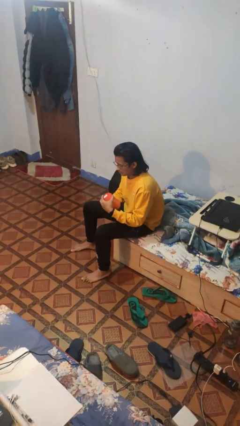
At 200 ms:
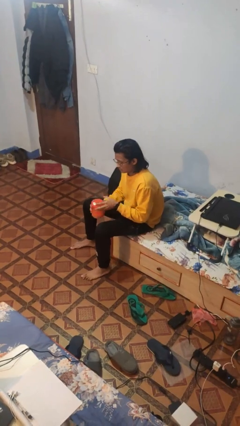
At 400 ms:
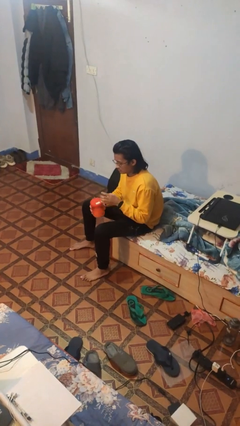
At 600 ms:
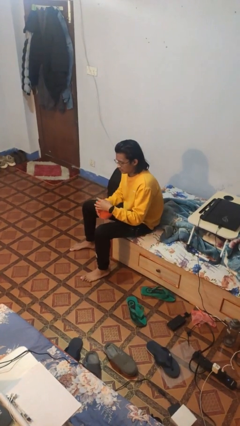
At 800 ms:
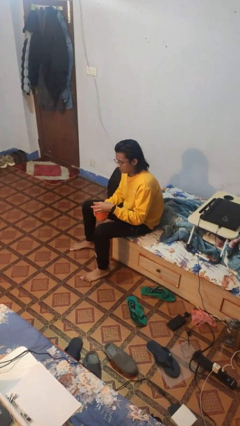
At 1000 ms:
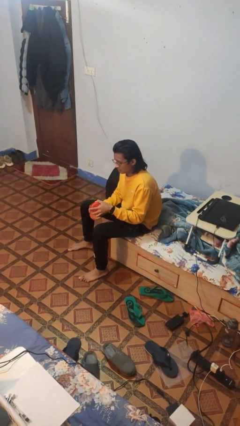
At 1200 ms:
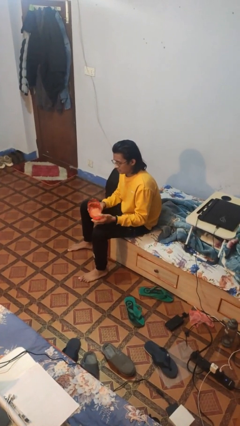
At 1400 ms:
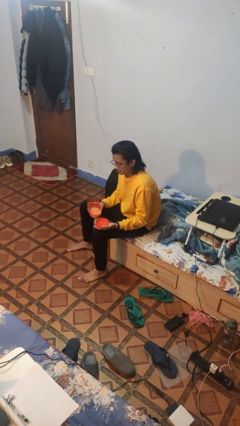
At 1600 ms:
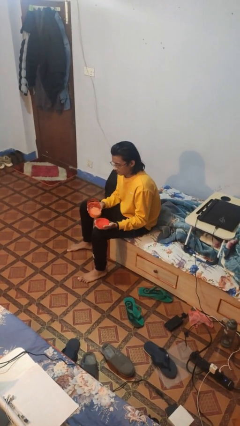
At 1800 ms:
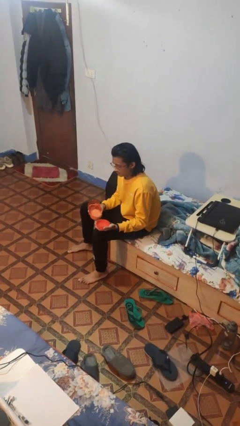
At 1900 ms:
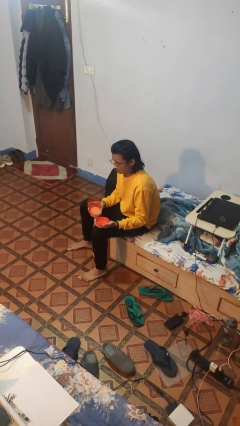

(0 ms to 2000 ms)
person opens jar

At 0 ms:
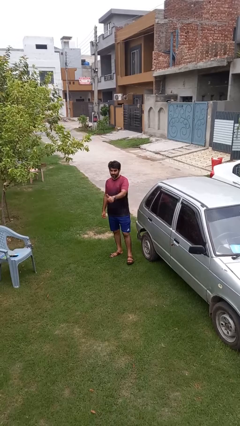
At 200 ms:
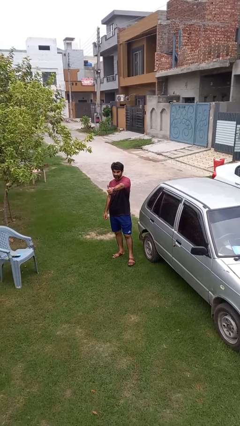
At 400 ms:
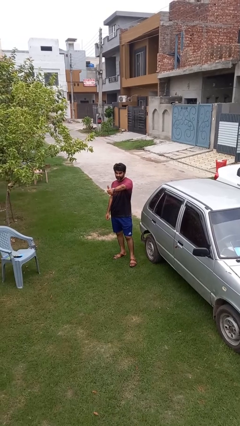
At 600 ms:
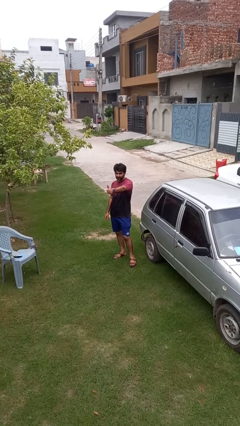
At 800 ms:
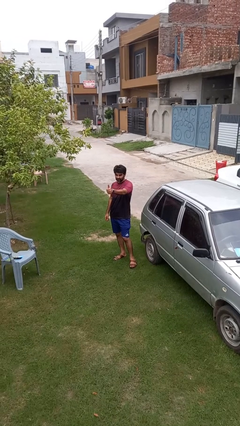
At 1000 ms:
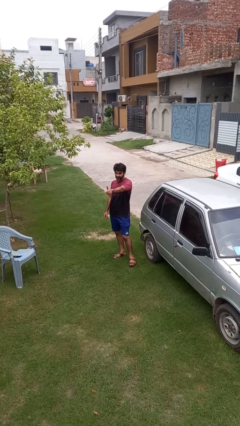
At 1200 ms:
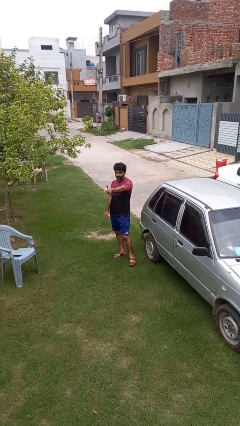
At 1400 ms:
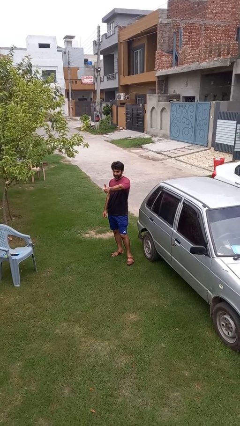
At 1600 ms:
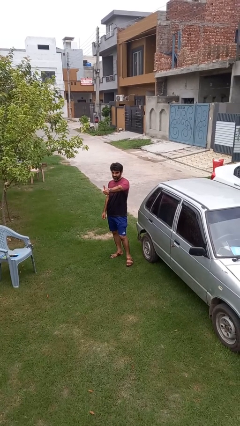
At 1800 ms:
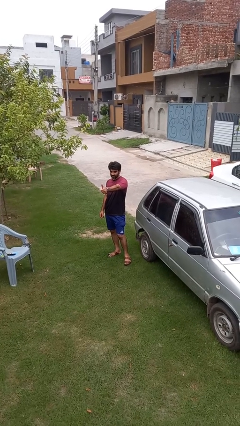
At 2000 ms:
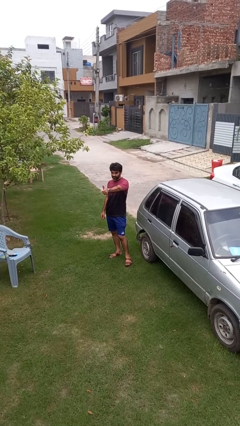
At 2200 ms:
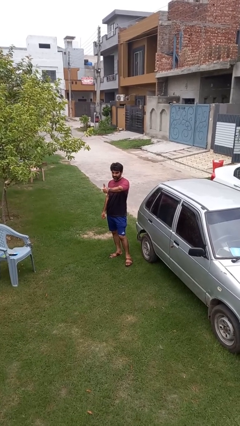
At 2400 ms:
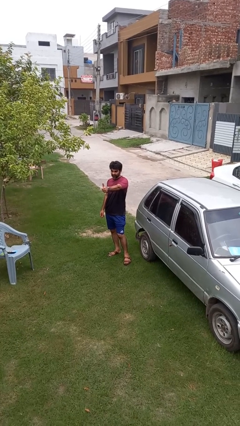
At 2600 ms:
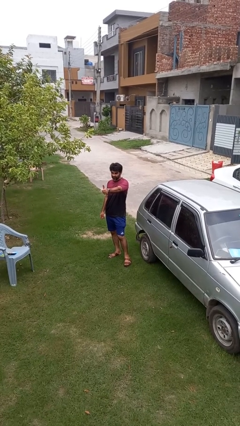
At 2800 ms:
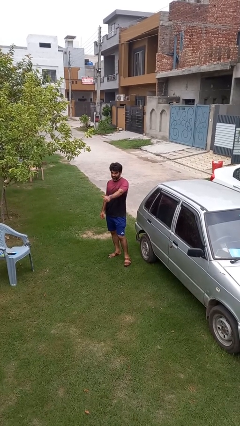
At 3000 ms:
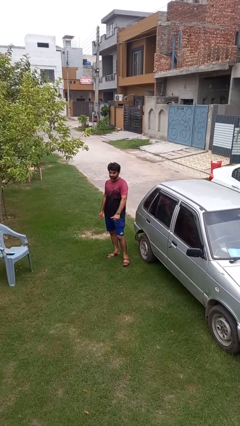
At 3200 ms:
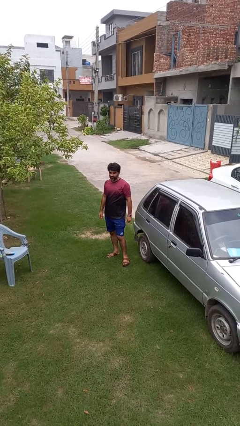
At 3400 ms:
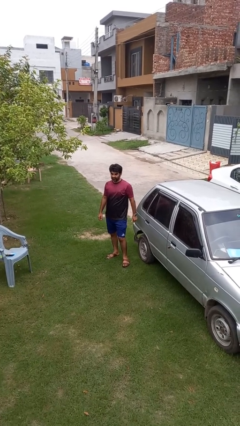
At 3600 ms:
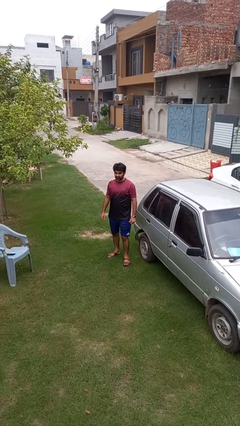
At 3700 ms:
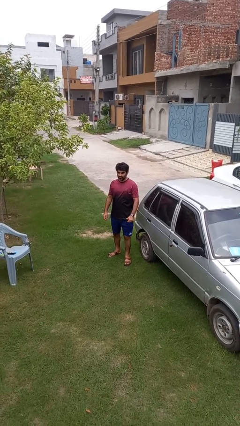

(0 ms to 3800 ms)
person gestures thumbs up

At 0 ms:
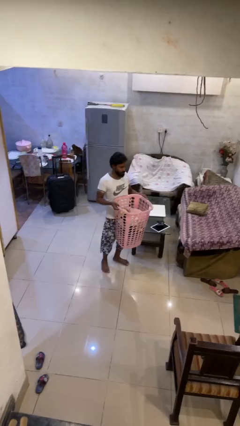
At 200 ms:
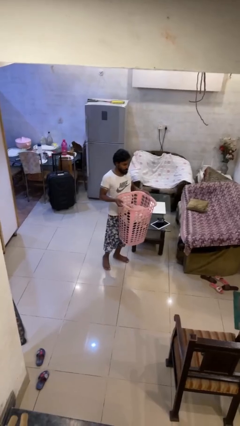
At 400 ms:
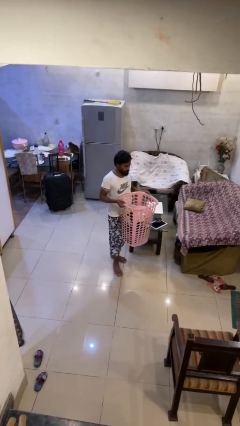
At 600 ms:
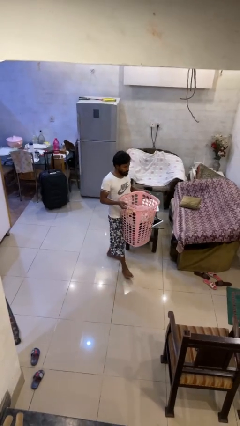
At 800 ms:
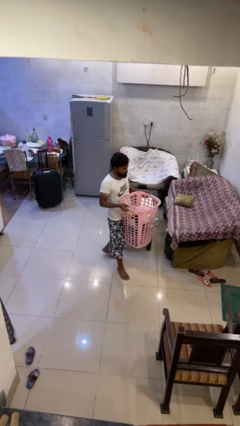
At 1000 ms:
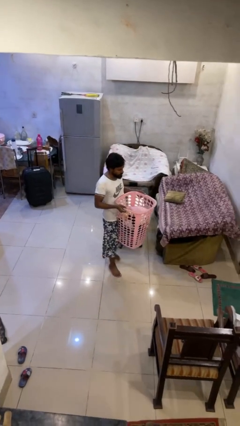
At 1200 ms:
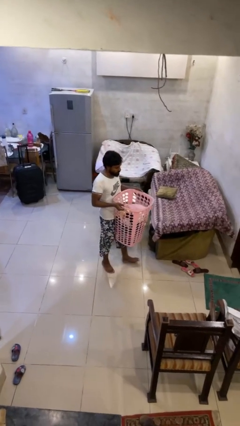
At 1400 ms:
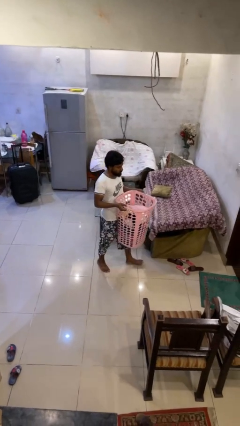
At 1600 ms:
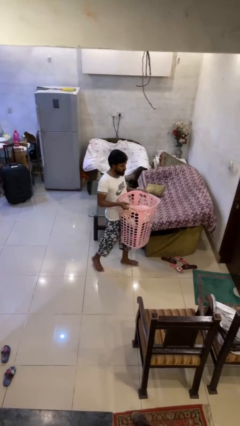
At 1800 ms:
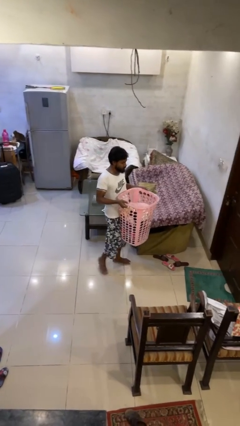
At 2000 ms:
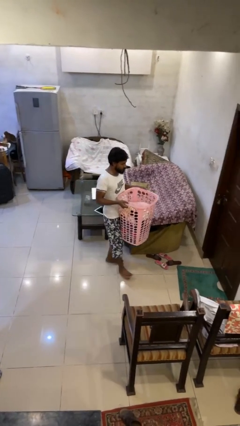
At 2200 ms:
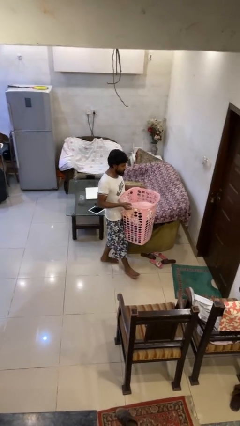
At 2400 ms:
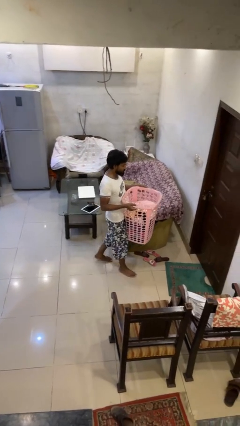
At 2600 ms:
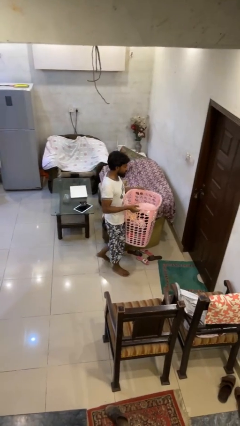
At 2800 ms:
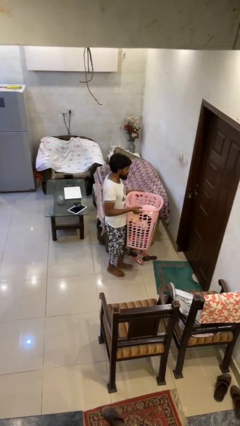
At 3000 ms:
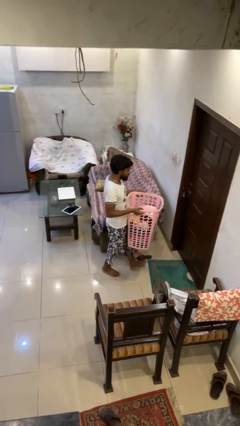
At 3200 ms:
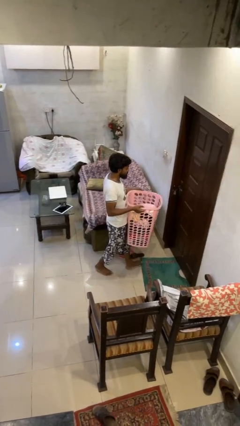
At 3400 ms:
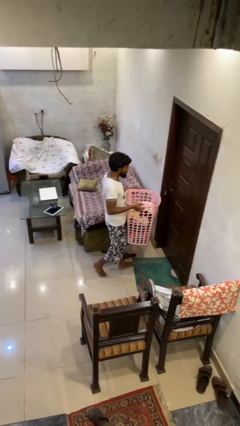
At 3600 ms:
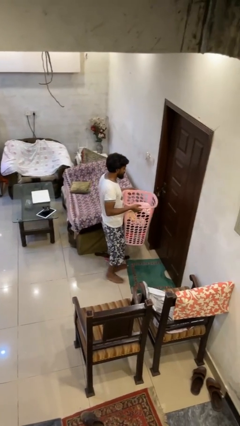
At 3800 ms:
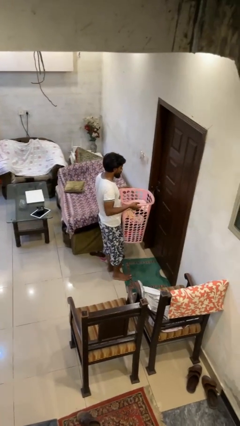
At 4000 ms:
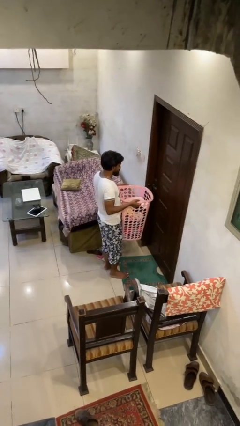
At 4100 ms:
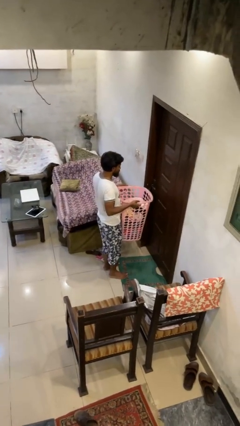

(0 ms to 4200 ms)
person carries laundry basket

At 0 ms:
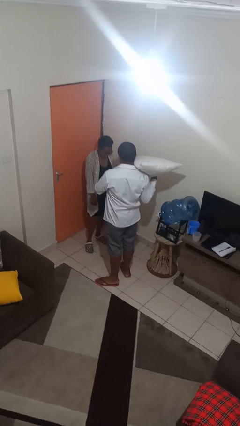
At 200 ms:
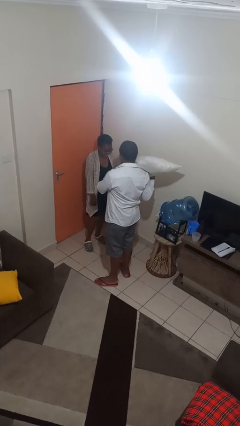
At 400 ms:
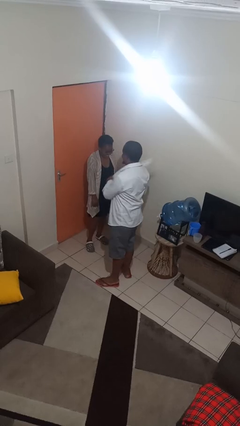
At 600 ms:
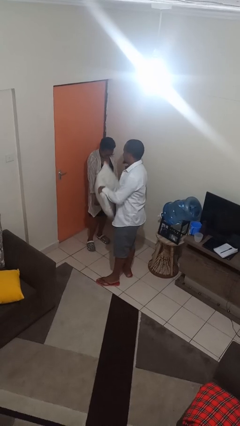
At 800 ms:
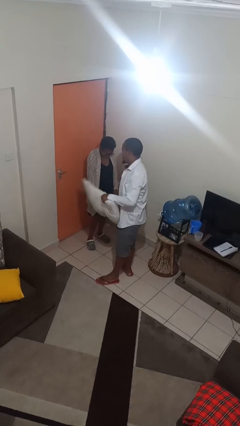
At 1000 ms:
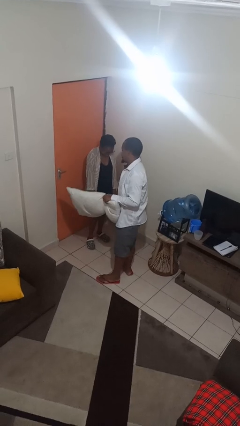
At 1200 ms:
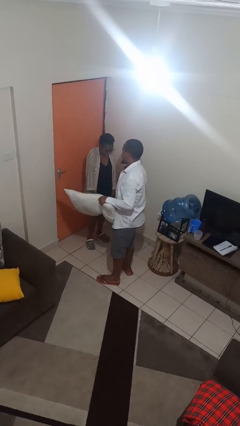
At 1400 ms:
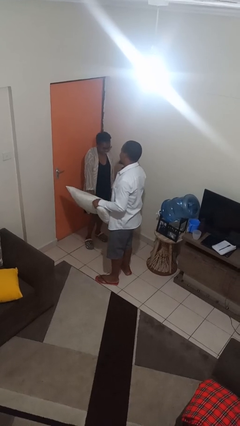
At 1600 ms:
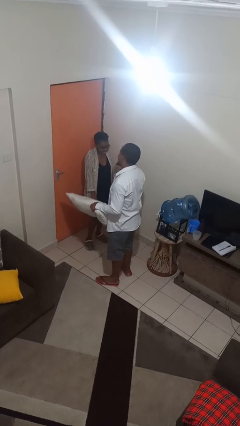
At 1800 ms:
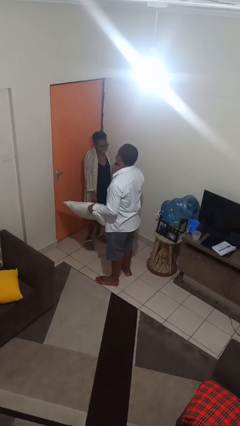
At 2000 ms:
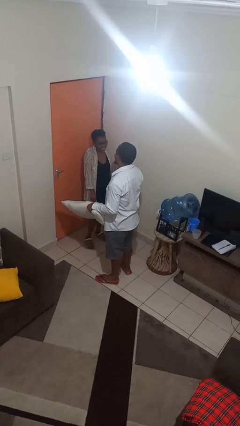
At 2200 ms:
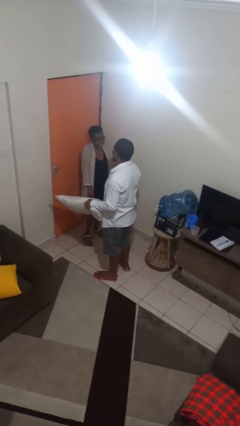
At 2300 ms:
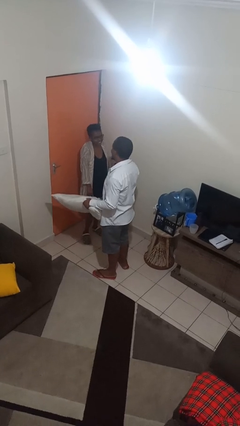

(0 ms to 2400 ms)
person hits person with pillow

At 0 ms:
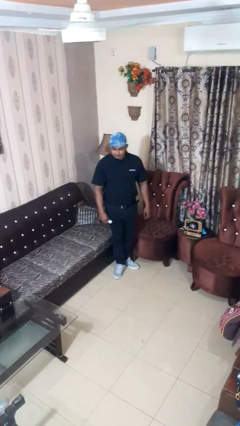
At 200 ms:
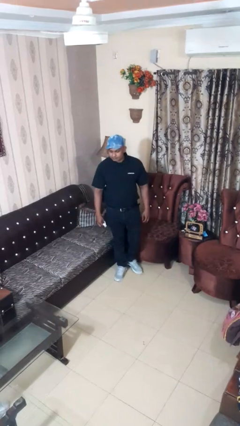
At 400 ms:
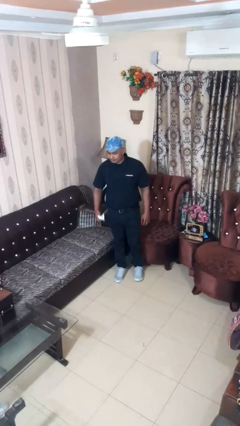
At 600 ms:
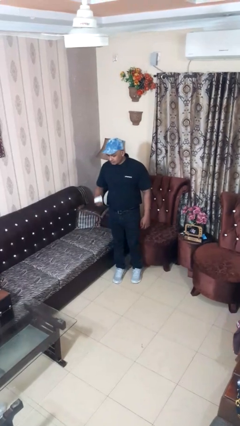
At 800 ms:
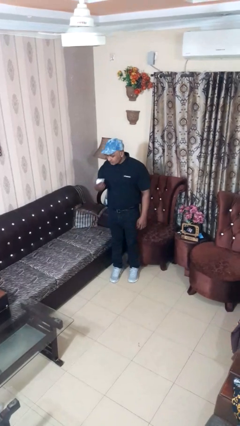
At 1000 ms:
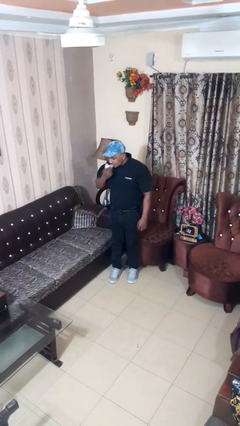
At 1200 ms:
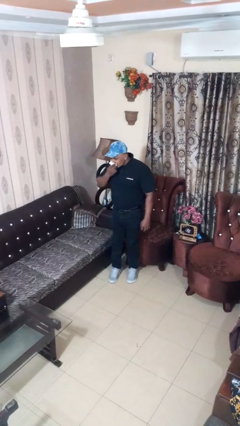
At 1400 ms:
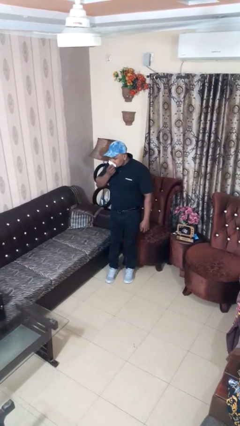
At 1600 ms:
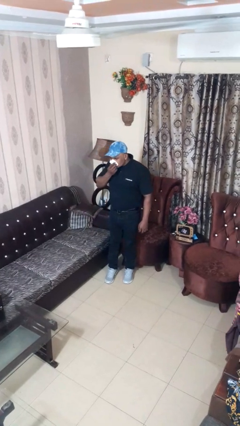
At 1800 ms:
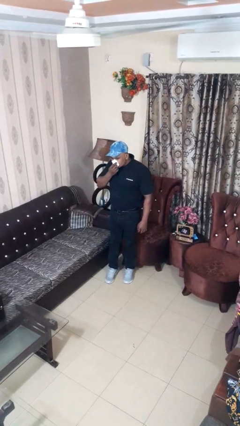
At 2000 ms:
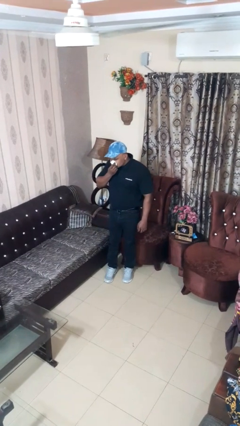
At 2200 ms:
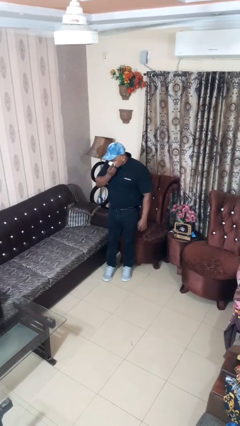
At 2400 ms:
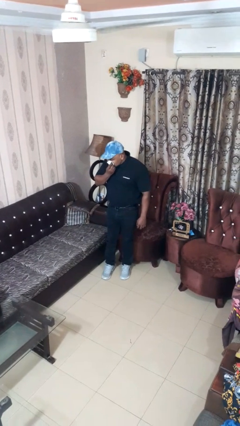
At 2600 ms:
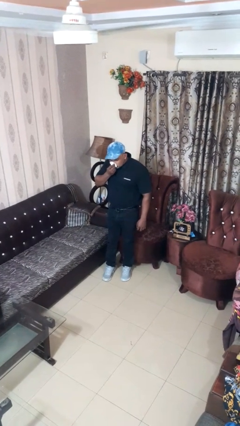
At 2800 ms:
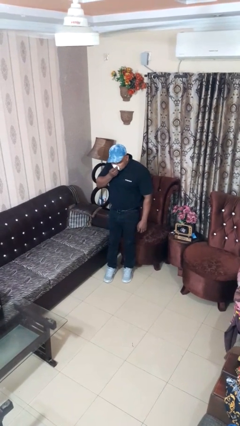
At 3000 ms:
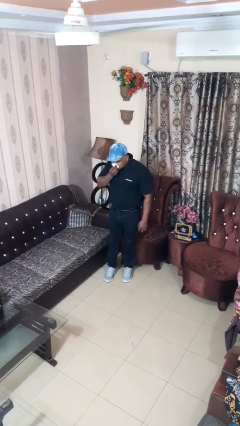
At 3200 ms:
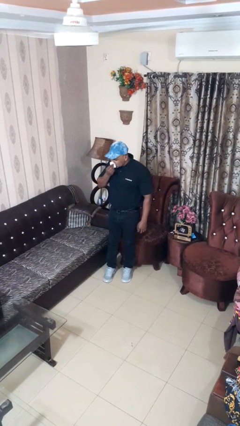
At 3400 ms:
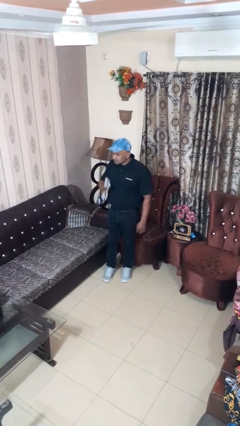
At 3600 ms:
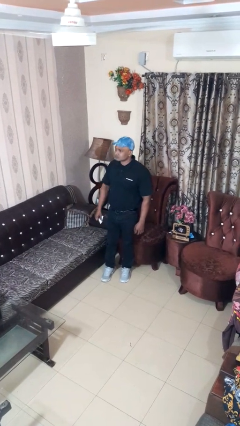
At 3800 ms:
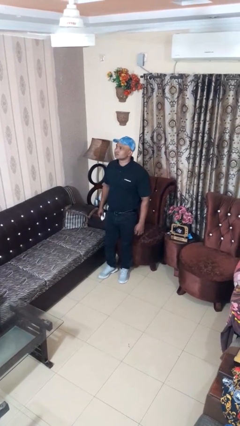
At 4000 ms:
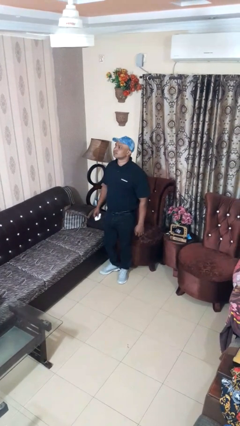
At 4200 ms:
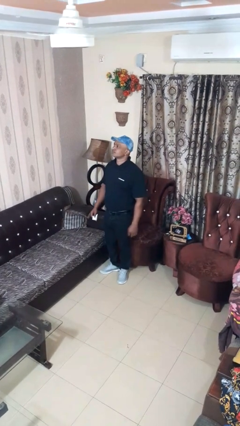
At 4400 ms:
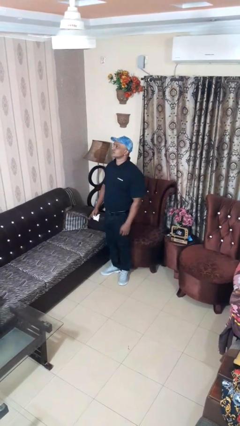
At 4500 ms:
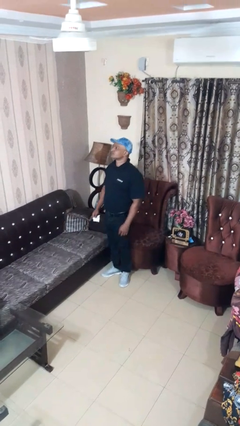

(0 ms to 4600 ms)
person blows nose

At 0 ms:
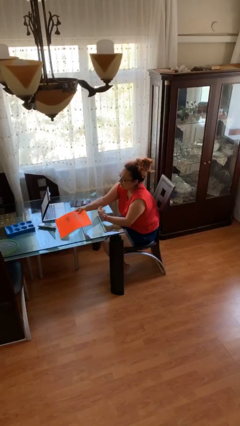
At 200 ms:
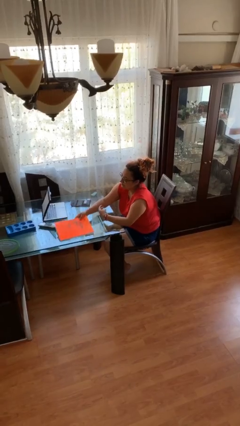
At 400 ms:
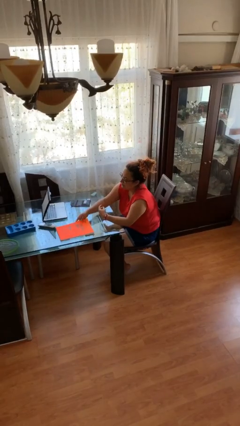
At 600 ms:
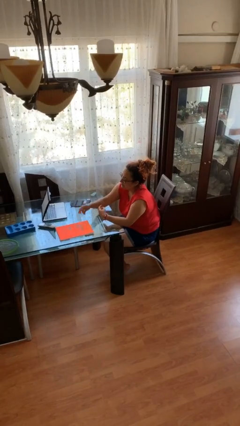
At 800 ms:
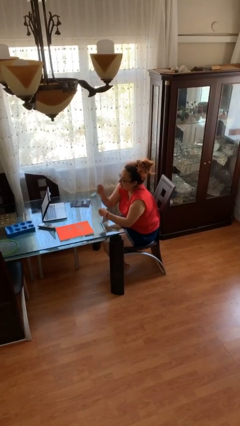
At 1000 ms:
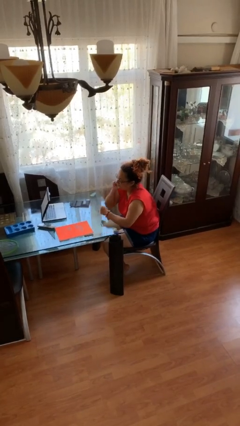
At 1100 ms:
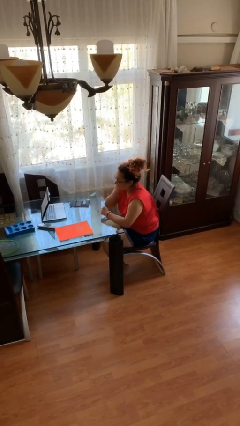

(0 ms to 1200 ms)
person puts down object on table
